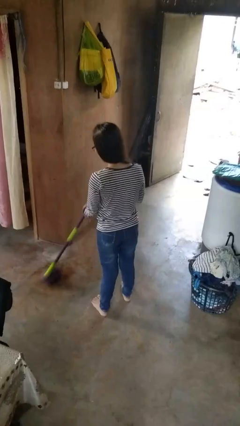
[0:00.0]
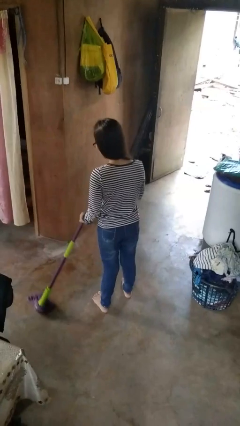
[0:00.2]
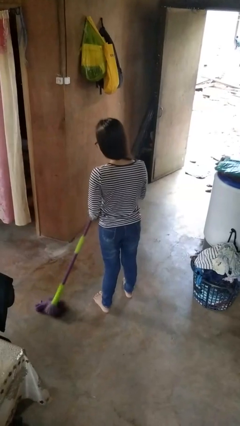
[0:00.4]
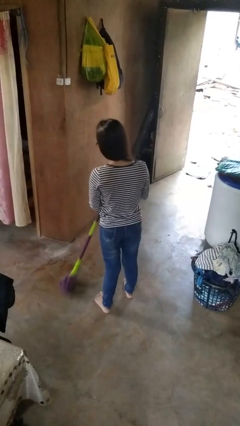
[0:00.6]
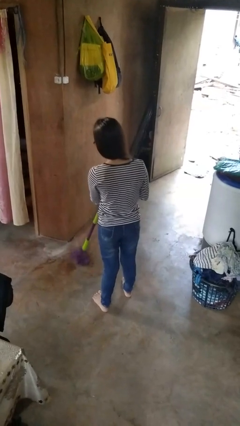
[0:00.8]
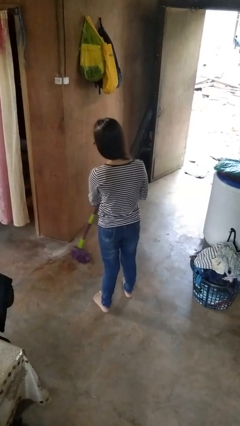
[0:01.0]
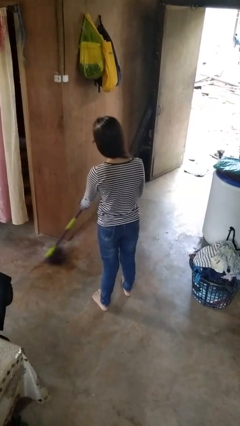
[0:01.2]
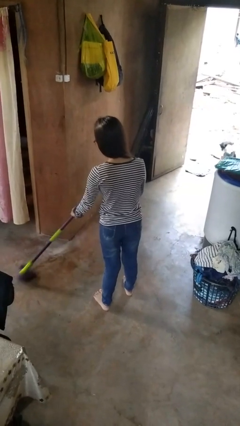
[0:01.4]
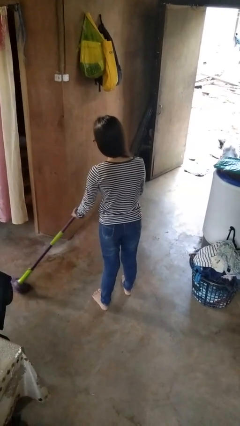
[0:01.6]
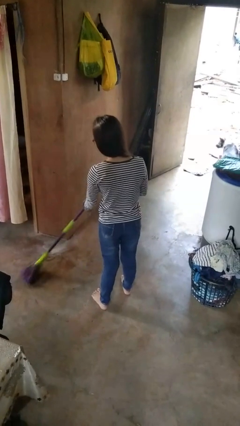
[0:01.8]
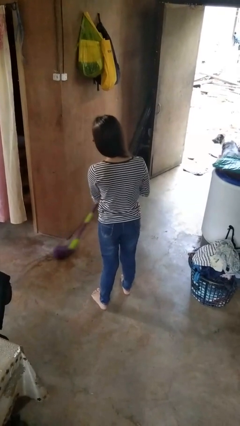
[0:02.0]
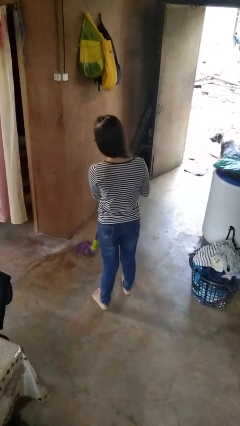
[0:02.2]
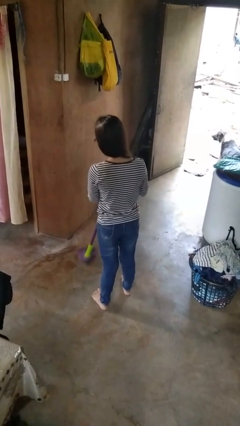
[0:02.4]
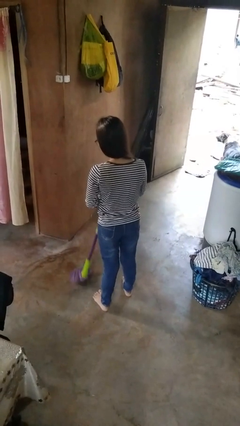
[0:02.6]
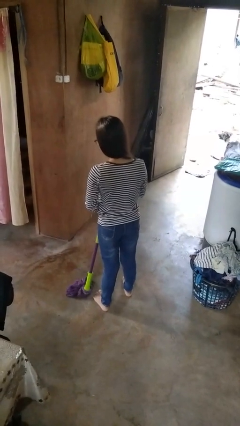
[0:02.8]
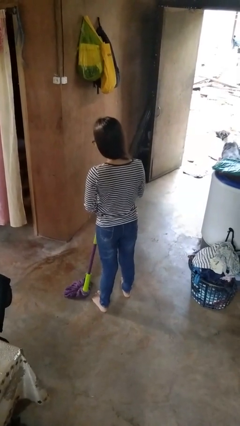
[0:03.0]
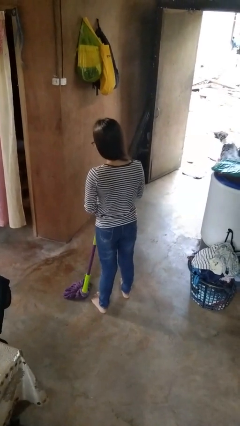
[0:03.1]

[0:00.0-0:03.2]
person mops

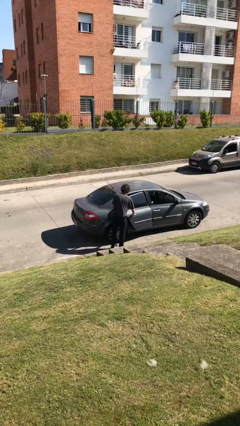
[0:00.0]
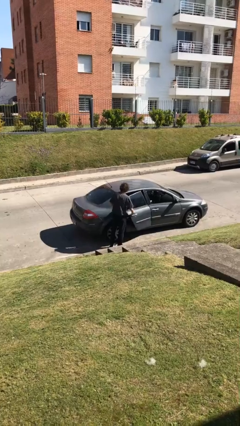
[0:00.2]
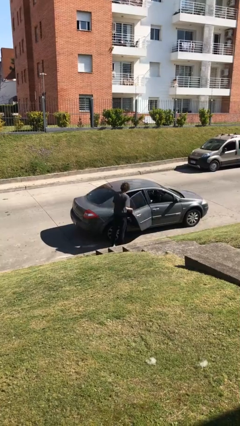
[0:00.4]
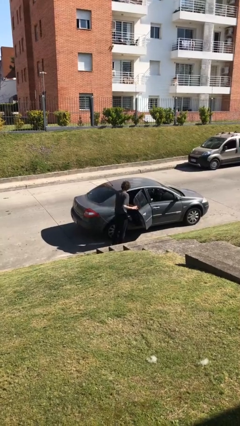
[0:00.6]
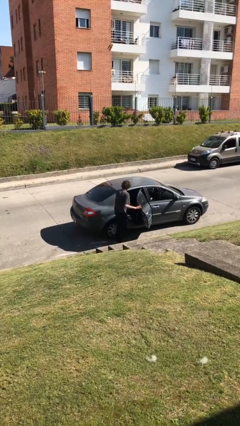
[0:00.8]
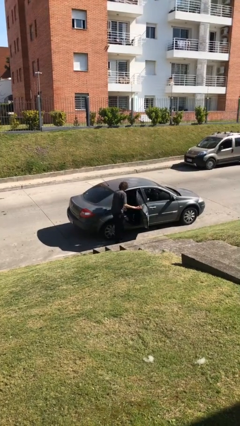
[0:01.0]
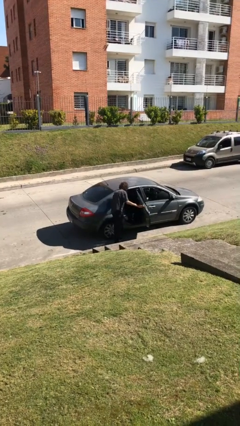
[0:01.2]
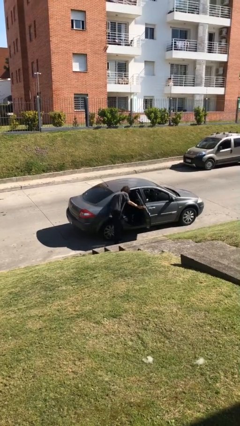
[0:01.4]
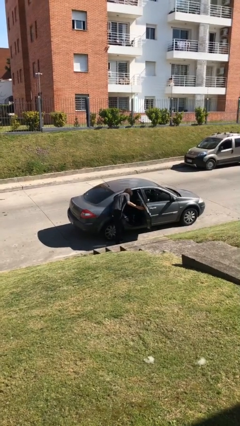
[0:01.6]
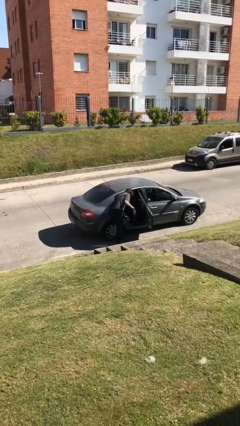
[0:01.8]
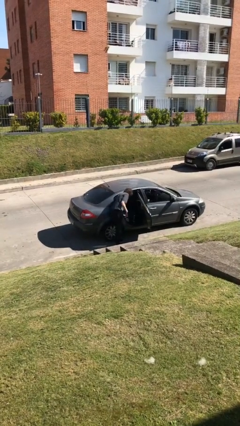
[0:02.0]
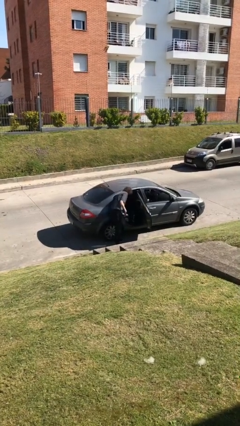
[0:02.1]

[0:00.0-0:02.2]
person opens car door

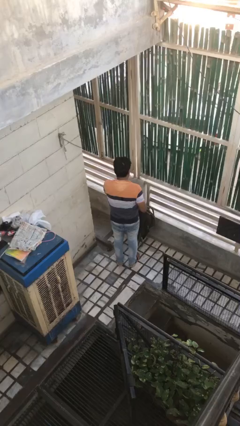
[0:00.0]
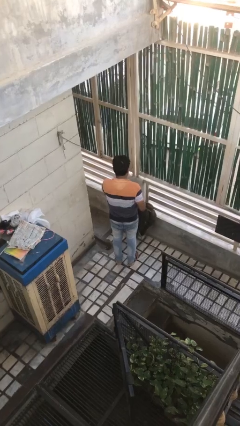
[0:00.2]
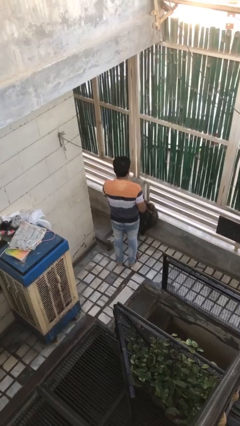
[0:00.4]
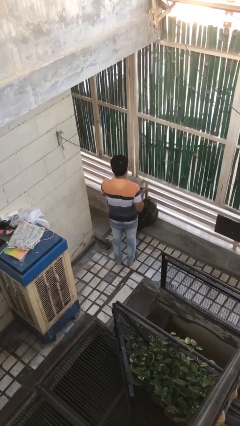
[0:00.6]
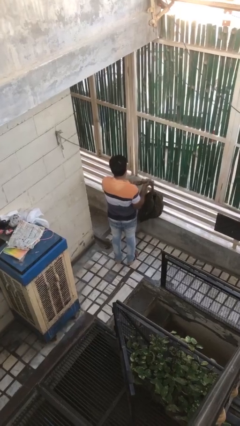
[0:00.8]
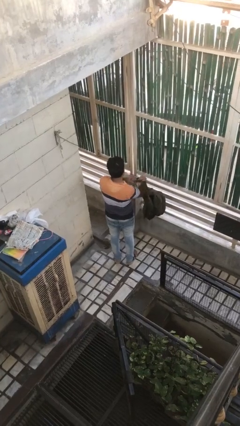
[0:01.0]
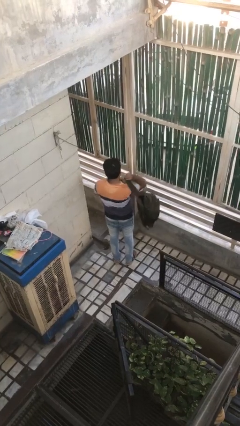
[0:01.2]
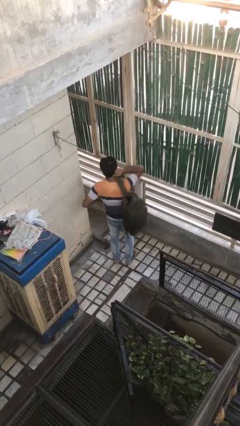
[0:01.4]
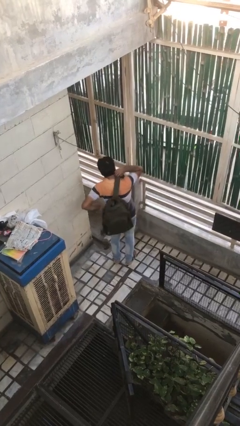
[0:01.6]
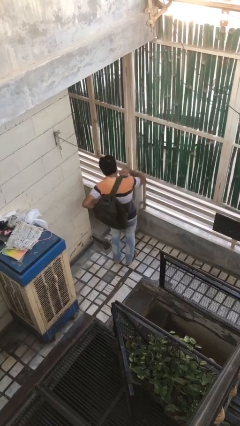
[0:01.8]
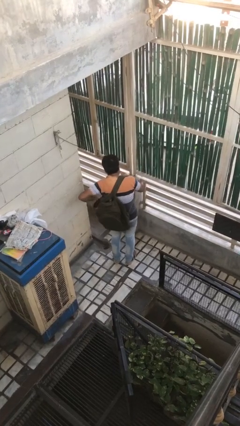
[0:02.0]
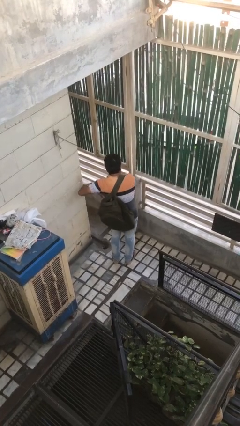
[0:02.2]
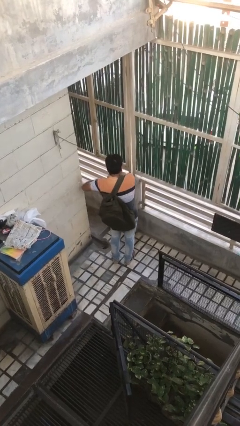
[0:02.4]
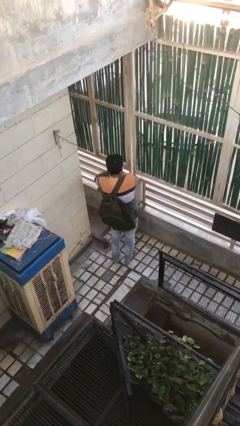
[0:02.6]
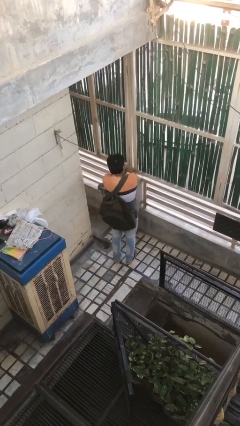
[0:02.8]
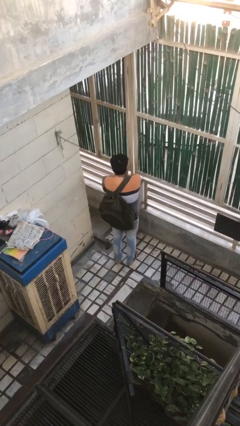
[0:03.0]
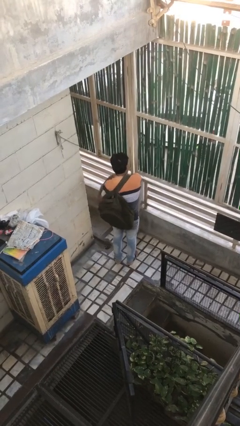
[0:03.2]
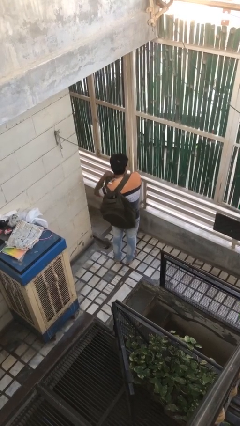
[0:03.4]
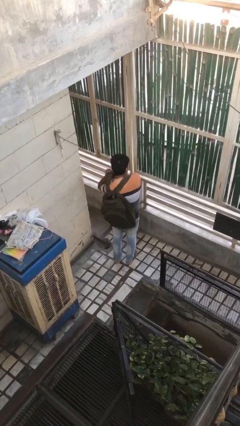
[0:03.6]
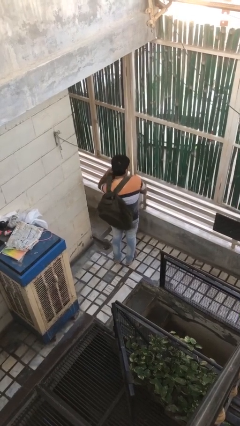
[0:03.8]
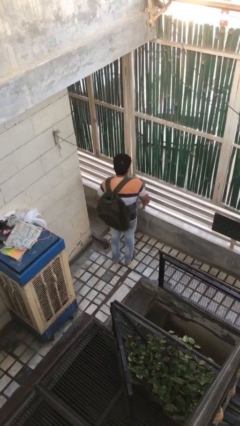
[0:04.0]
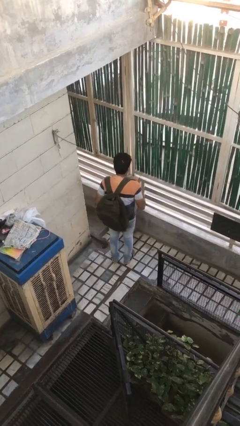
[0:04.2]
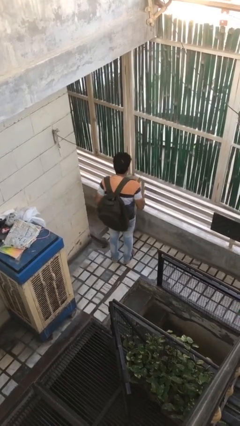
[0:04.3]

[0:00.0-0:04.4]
person puts on backpack

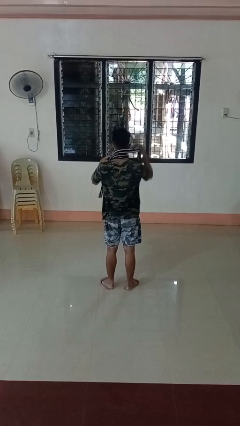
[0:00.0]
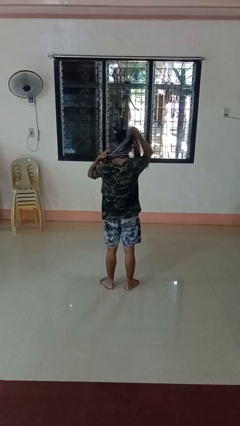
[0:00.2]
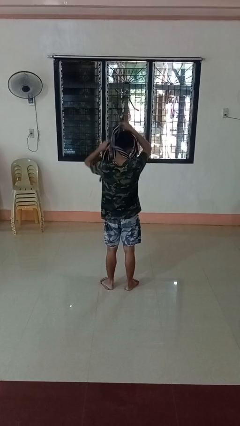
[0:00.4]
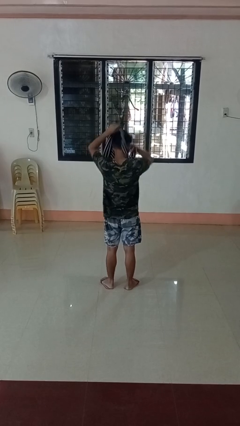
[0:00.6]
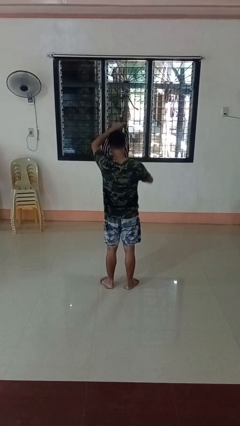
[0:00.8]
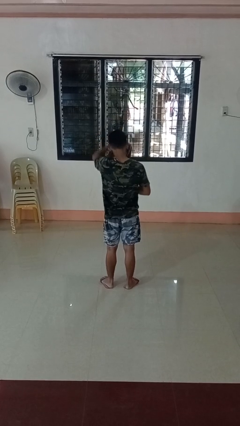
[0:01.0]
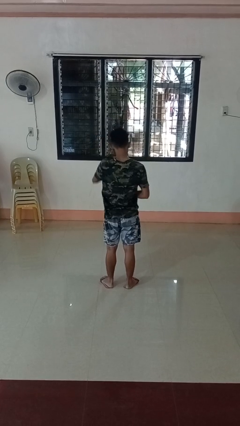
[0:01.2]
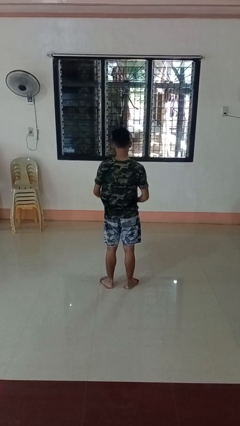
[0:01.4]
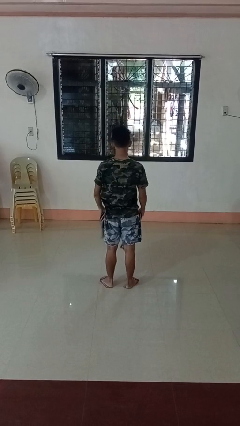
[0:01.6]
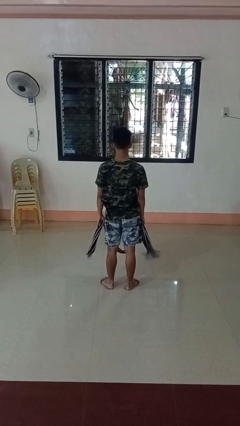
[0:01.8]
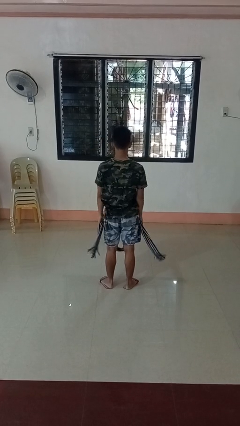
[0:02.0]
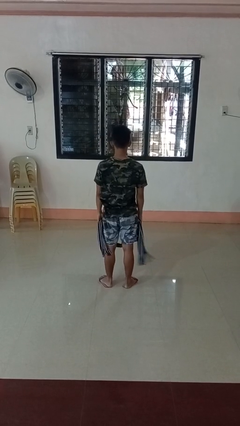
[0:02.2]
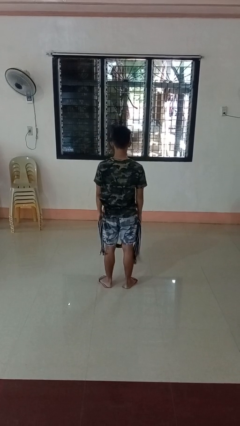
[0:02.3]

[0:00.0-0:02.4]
person takes off scarf

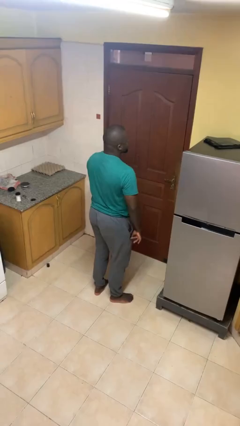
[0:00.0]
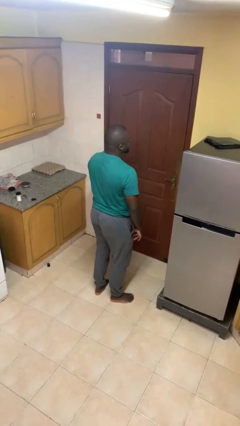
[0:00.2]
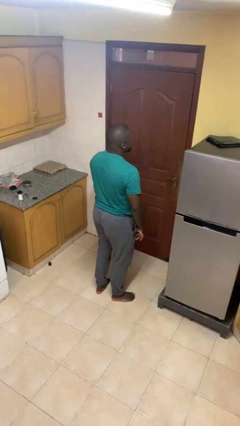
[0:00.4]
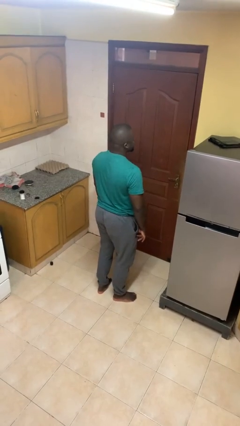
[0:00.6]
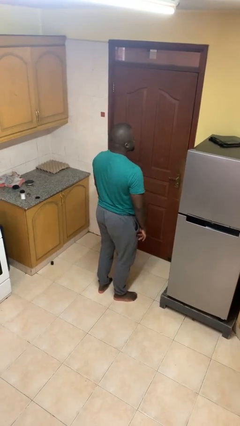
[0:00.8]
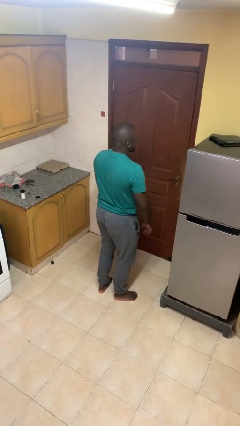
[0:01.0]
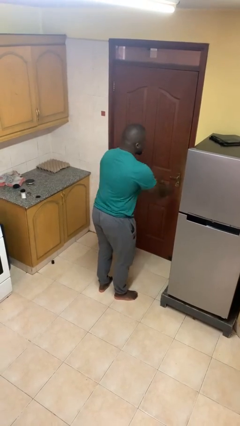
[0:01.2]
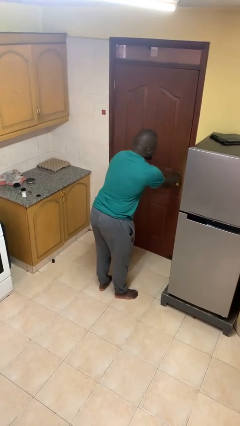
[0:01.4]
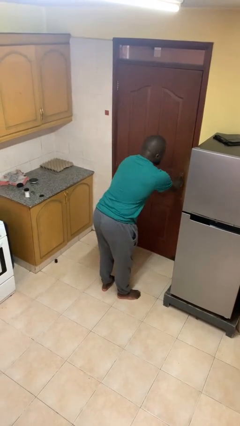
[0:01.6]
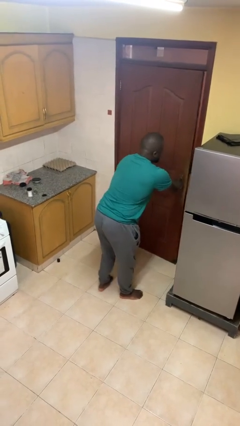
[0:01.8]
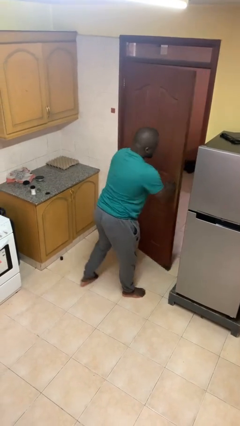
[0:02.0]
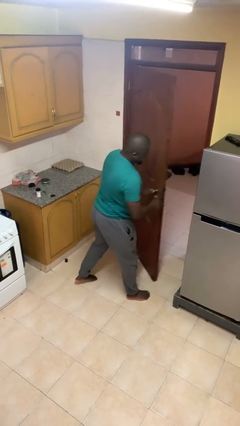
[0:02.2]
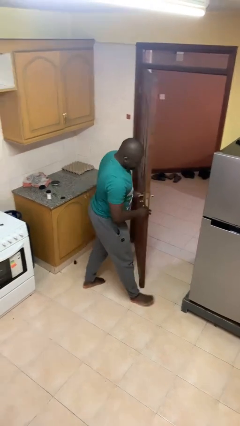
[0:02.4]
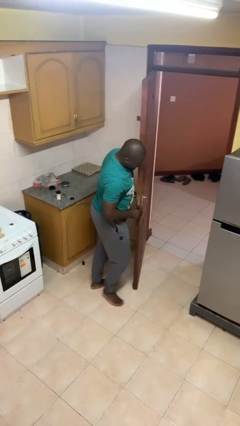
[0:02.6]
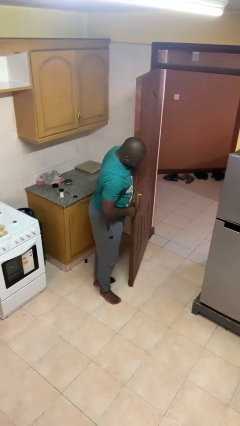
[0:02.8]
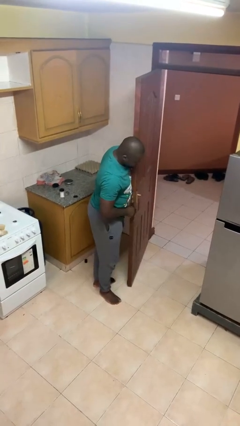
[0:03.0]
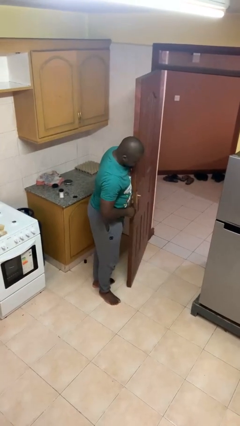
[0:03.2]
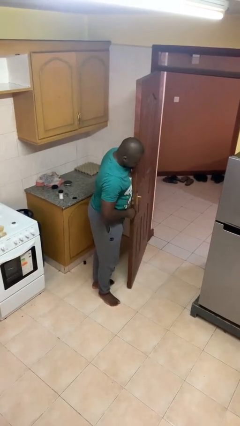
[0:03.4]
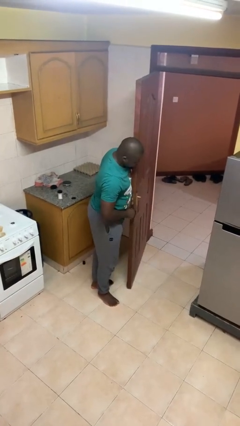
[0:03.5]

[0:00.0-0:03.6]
person opens facility door

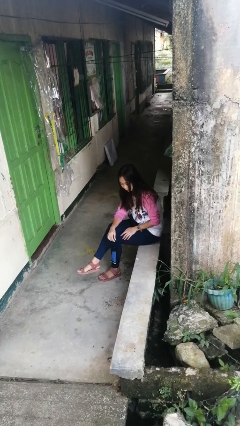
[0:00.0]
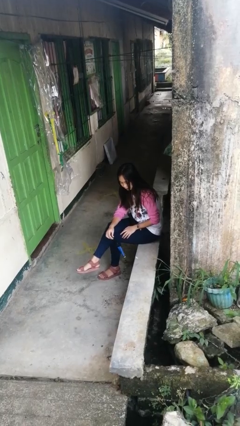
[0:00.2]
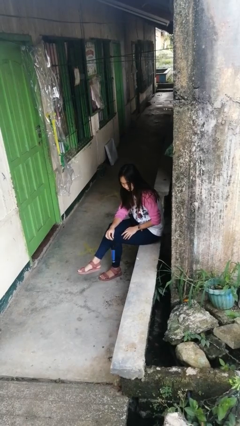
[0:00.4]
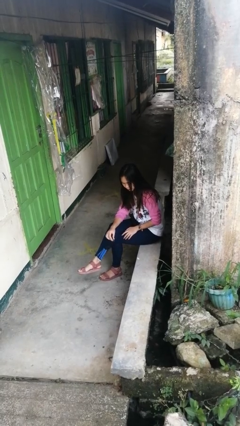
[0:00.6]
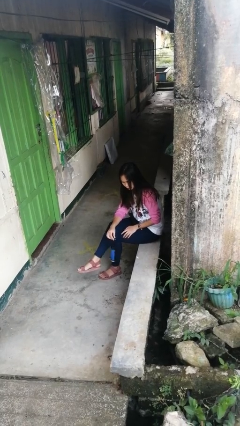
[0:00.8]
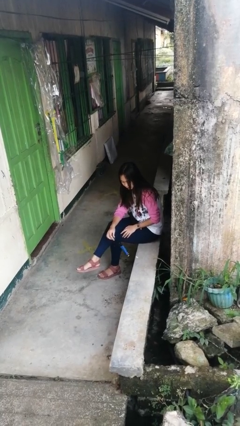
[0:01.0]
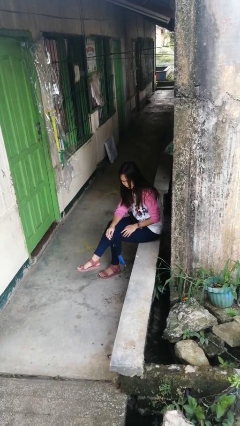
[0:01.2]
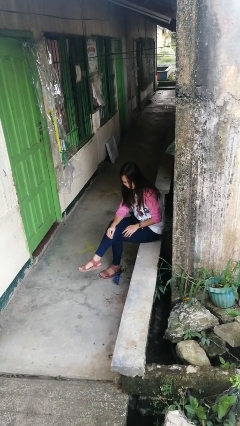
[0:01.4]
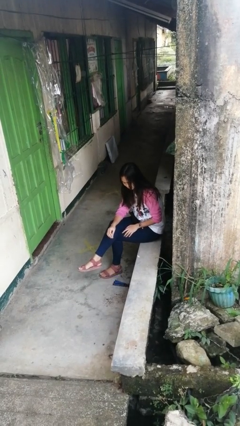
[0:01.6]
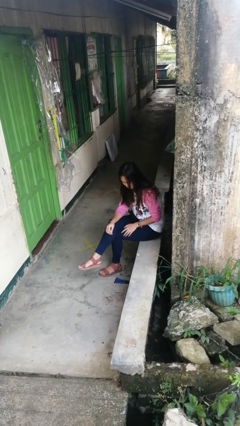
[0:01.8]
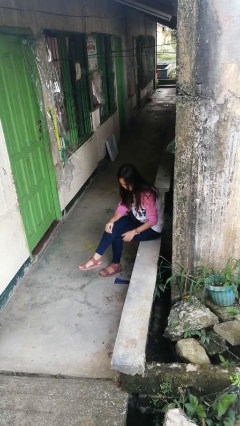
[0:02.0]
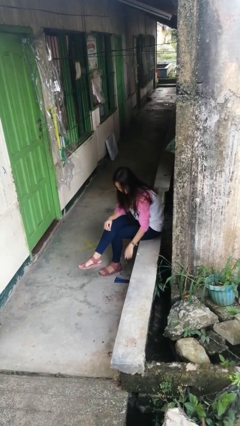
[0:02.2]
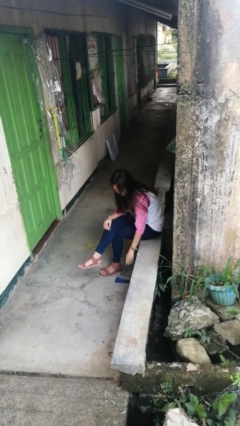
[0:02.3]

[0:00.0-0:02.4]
person drops object
